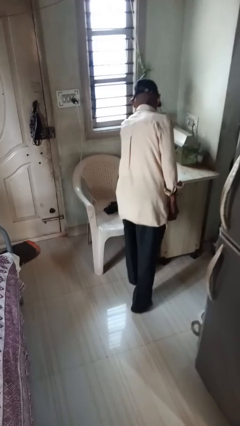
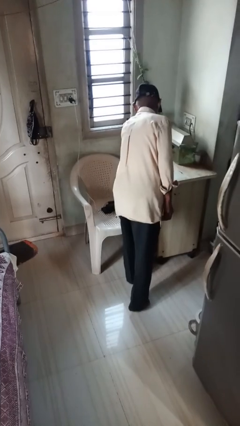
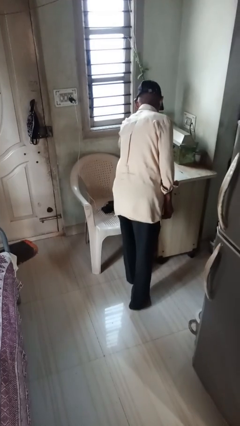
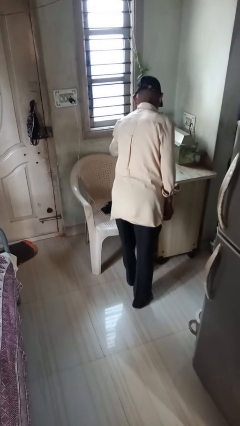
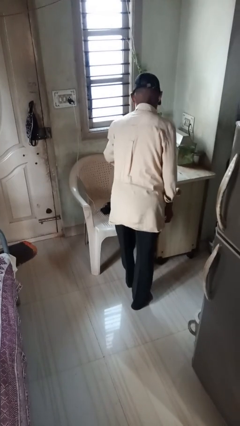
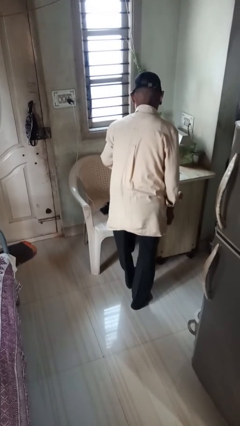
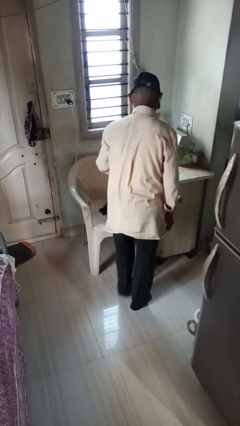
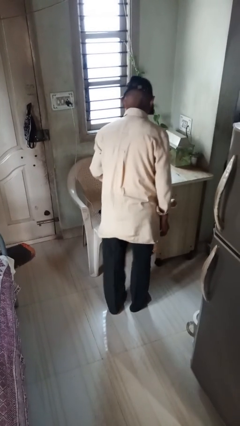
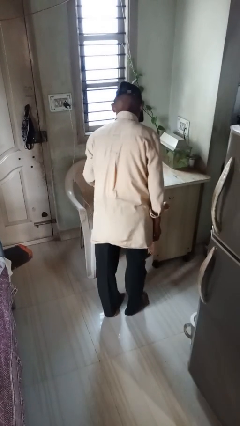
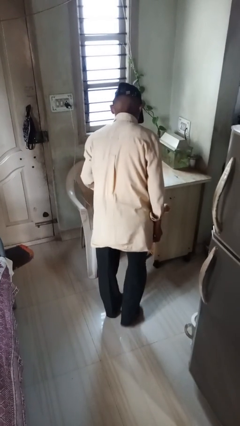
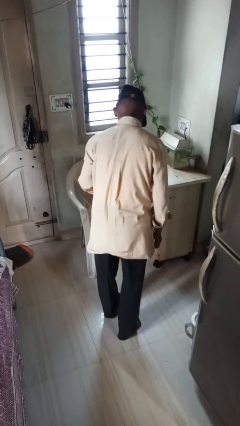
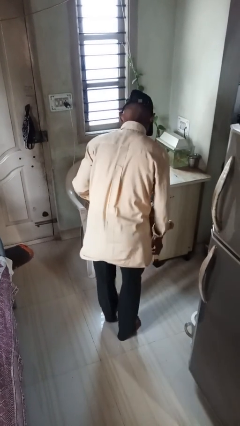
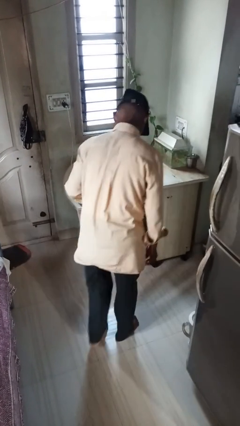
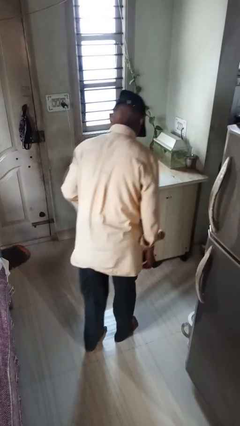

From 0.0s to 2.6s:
person picks up object from table

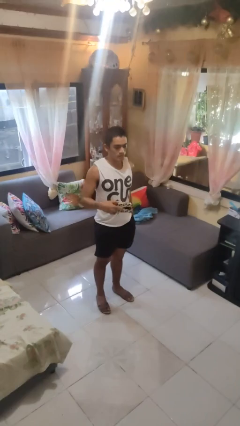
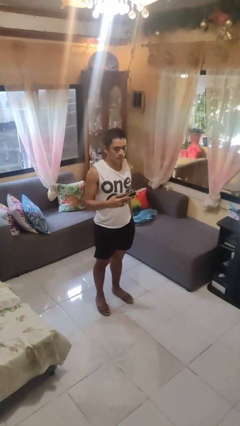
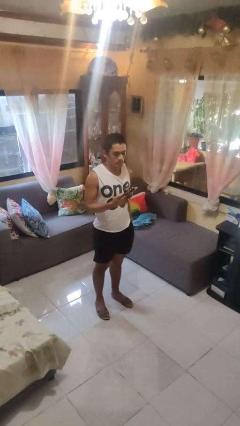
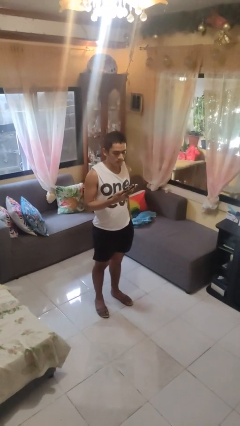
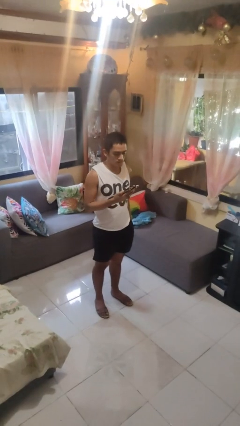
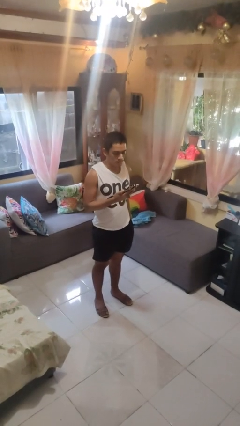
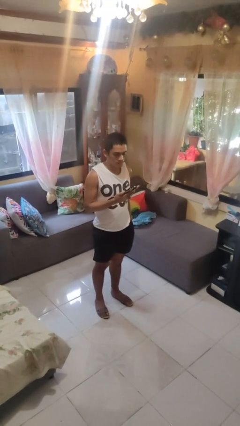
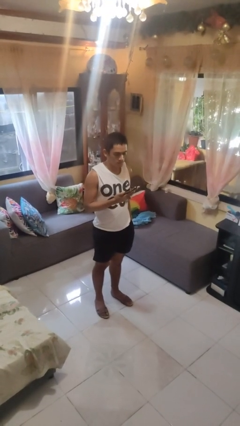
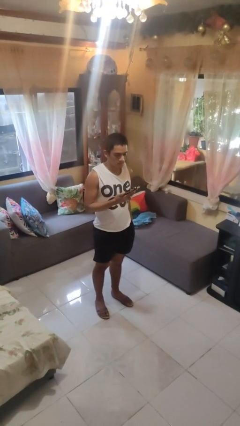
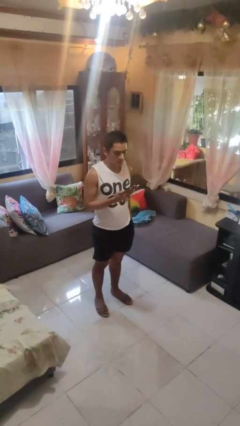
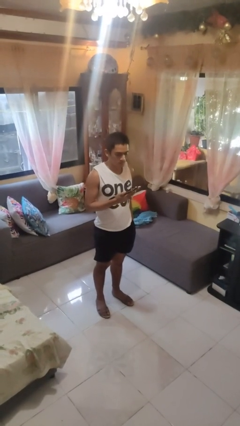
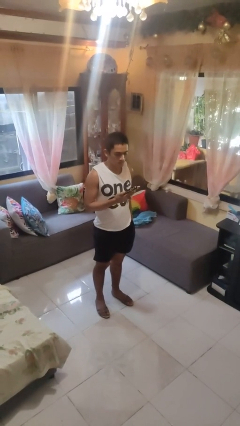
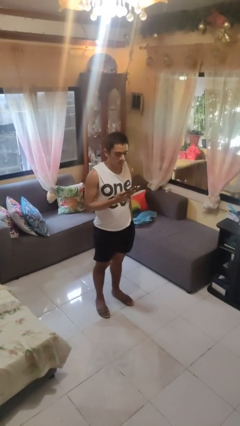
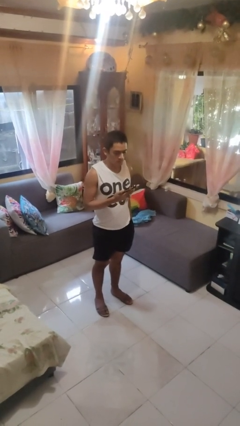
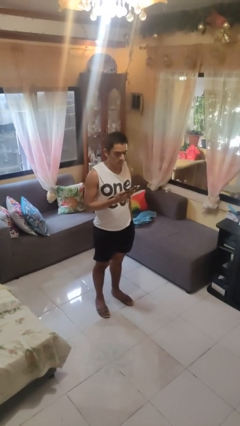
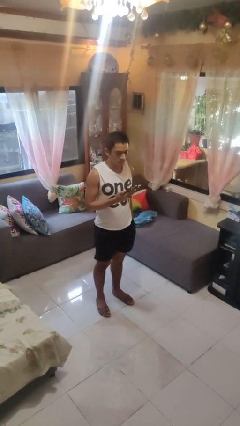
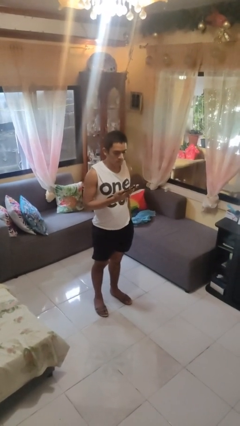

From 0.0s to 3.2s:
person takes phone from pocket

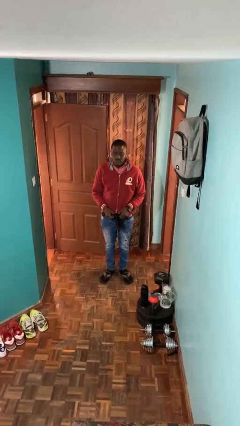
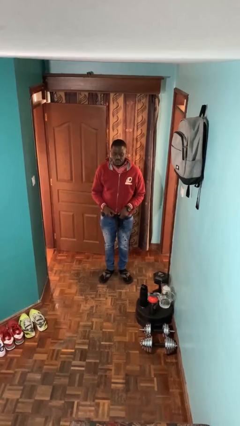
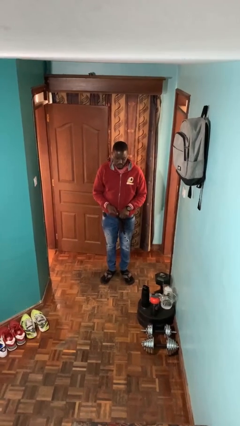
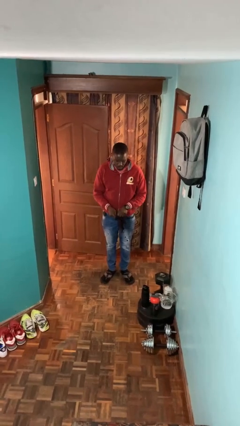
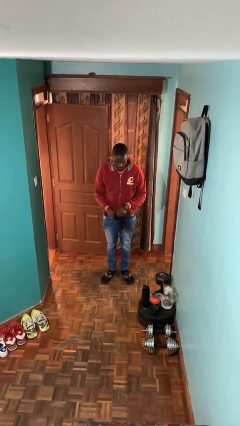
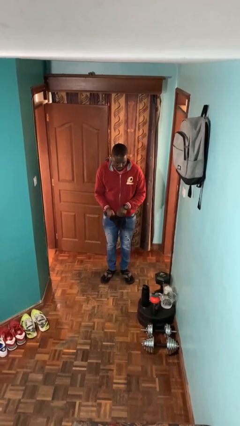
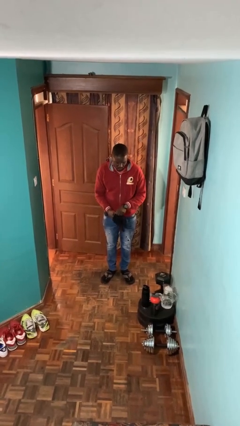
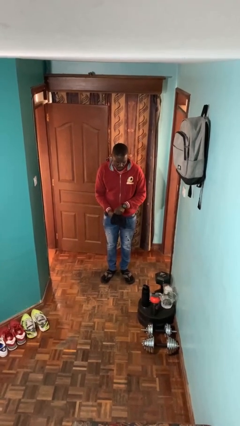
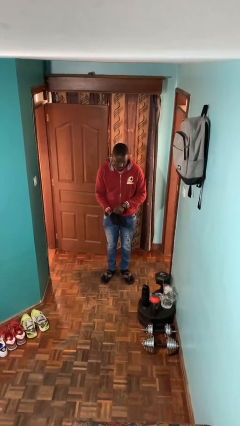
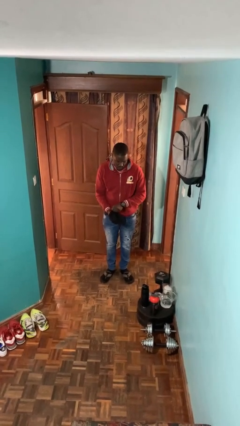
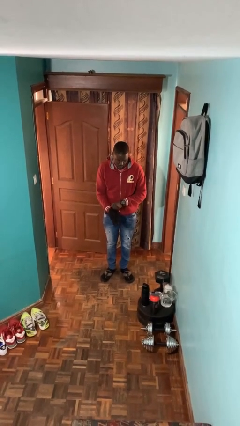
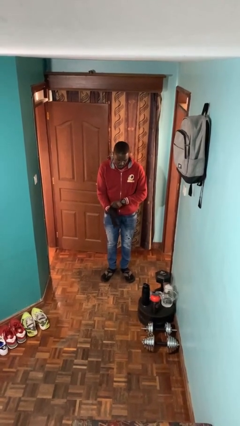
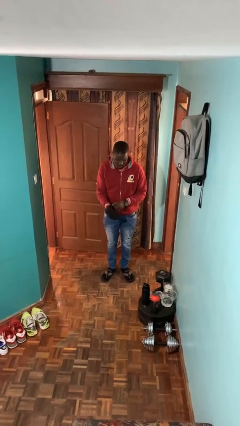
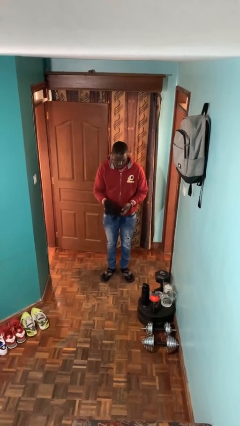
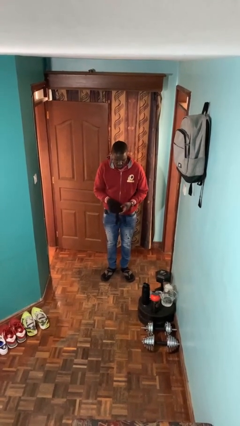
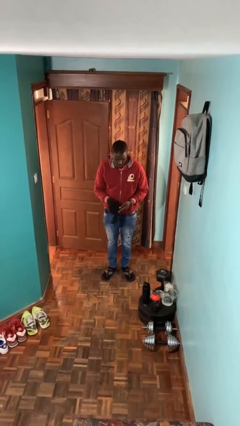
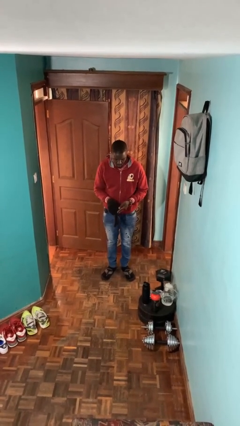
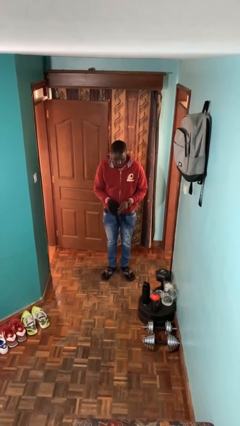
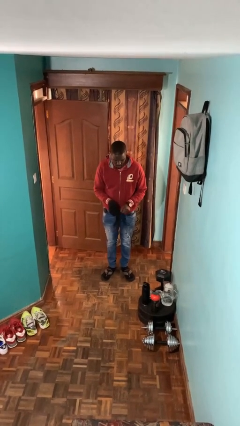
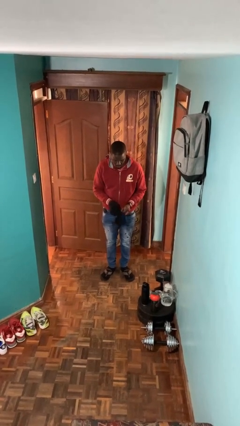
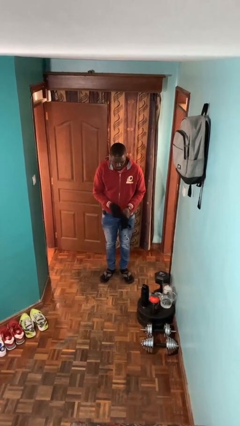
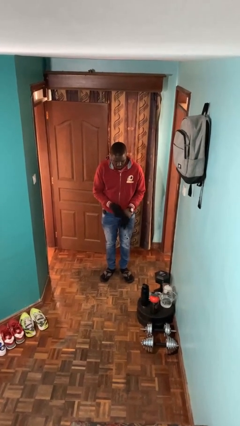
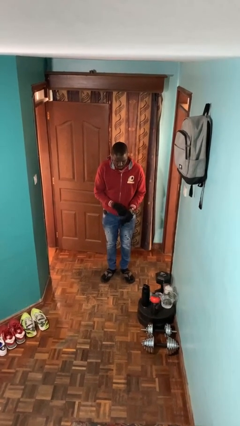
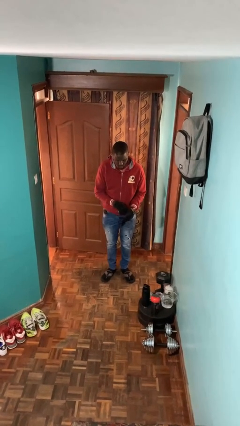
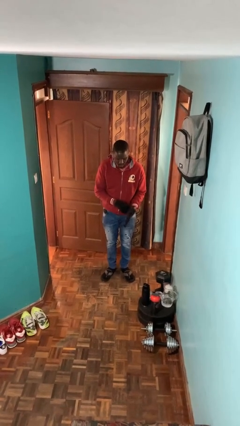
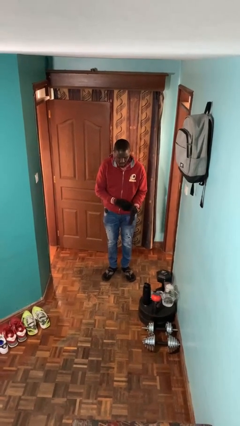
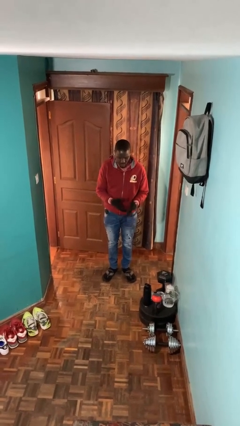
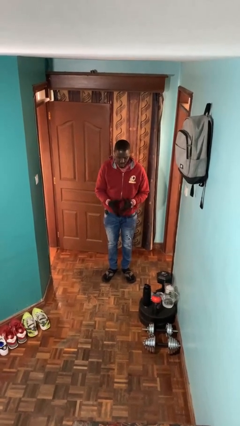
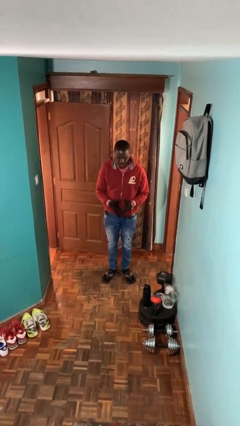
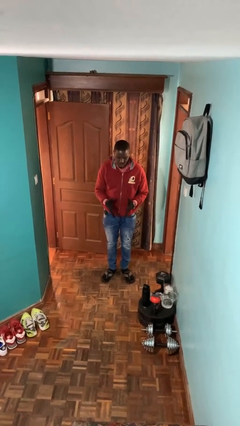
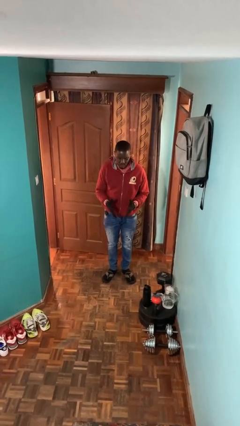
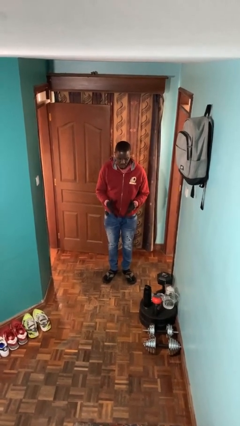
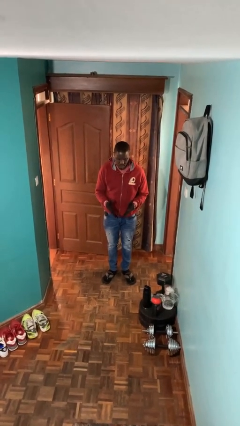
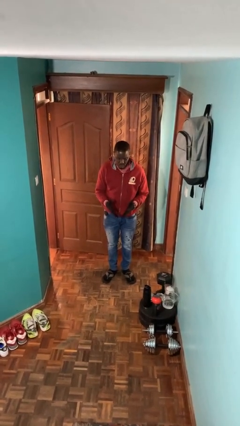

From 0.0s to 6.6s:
person puts on gloves

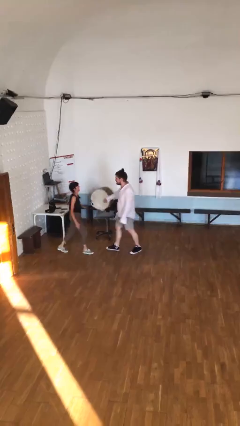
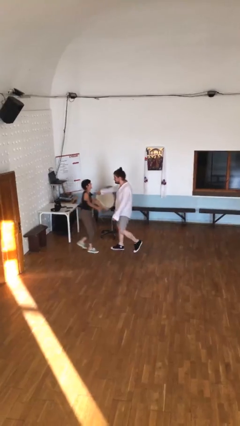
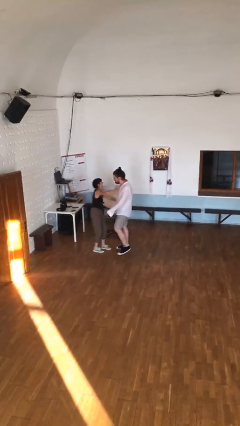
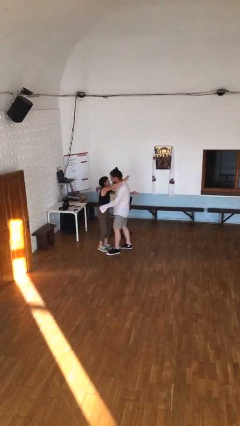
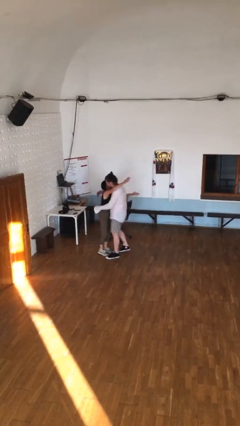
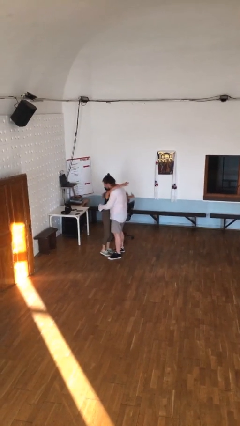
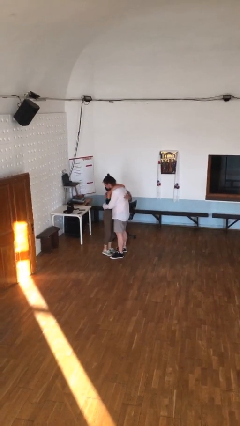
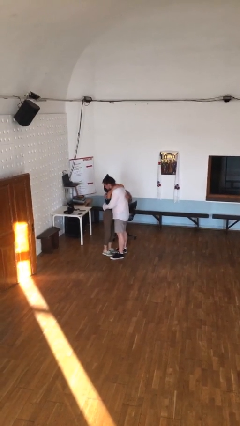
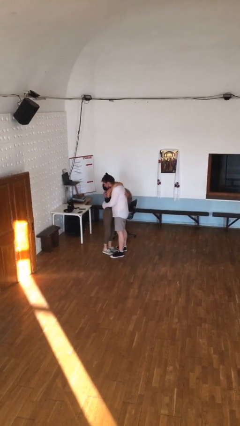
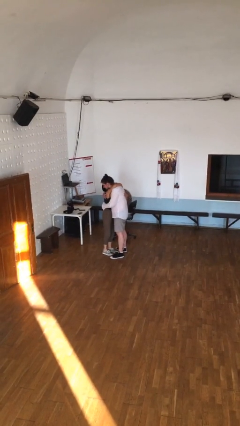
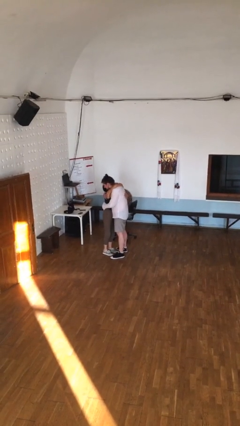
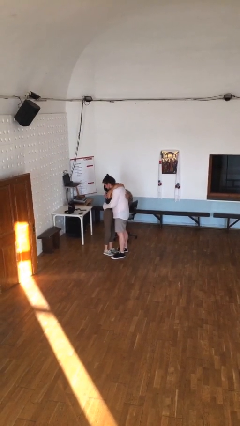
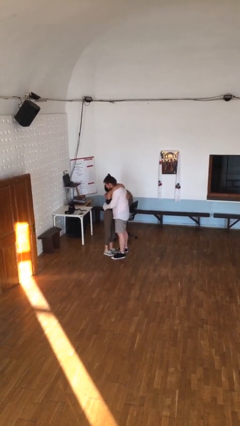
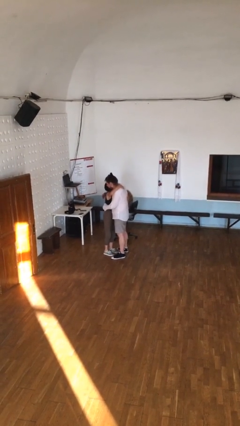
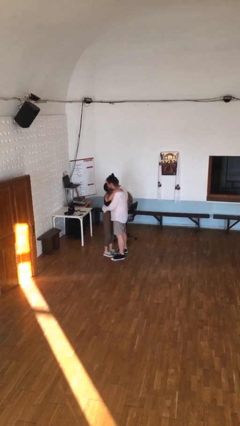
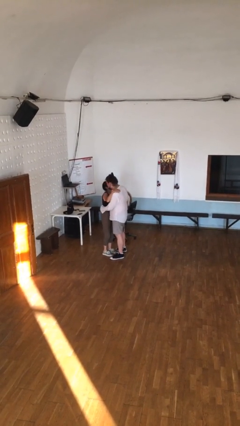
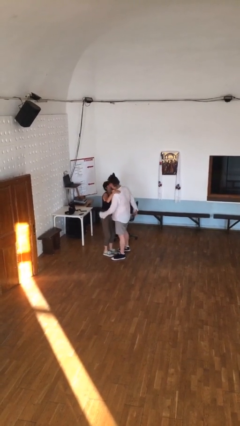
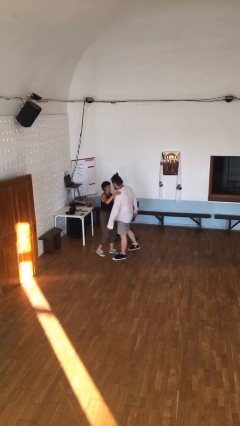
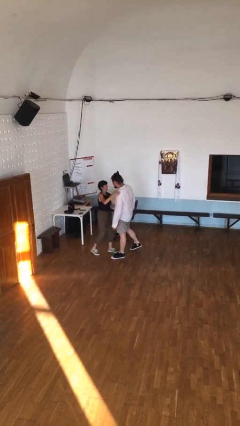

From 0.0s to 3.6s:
person embraces person

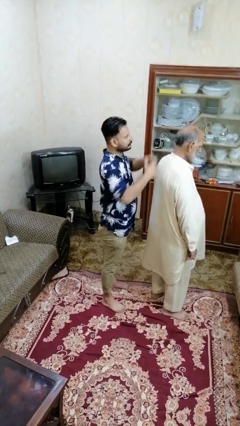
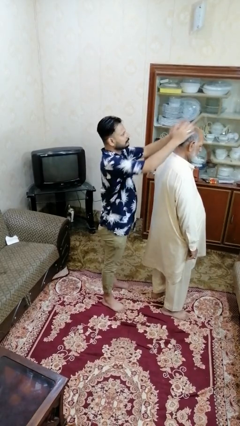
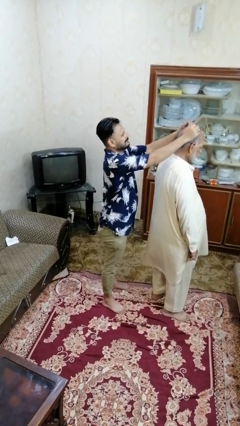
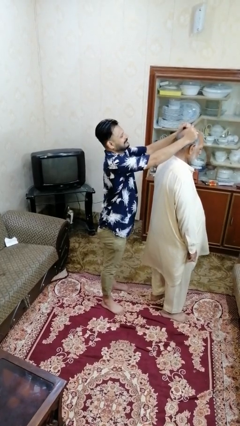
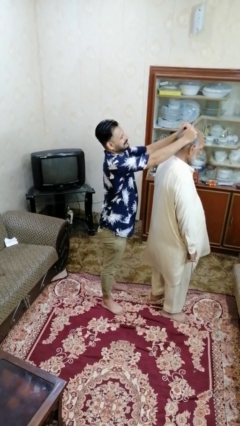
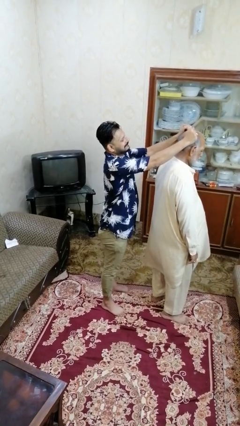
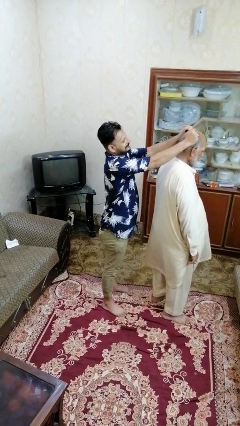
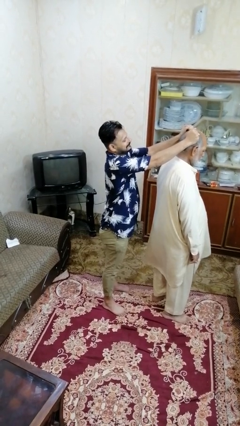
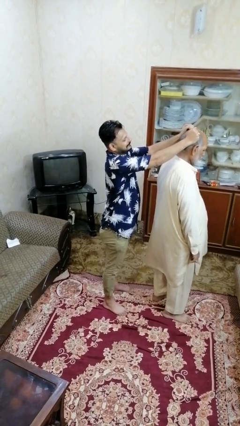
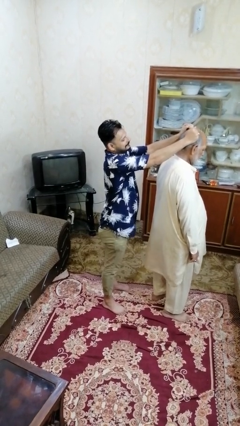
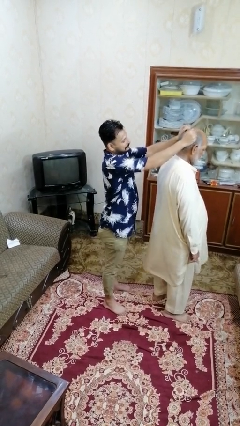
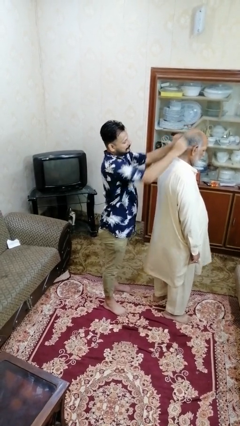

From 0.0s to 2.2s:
person grabs person by hair
